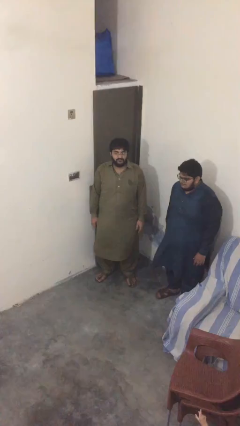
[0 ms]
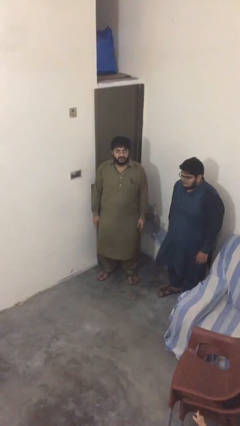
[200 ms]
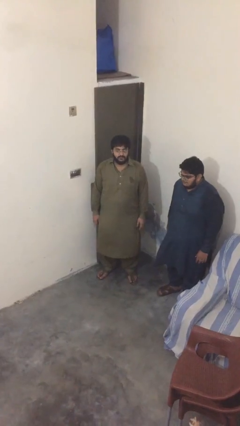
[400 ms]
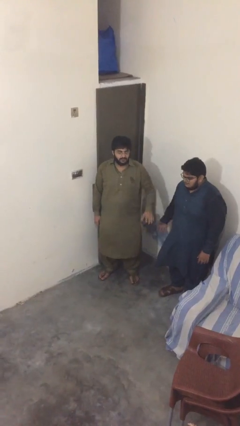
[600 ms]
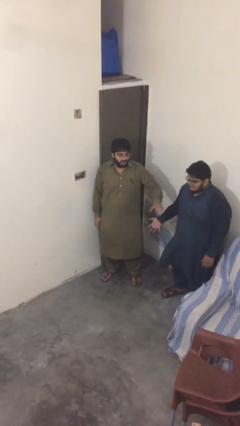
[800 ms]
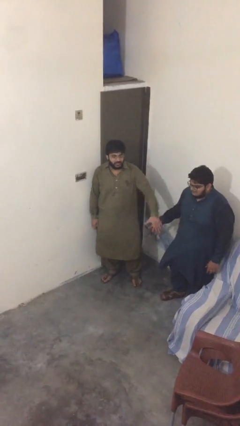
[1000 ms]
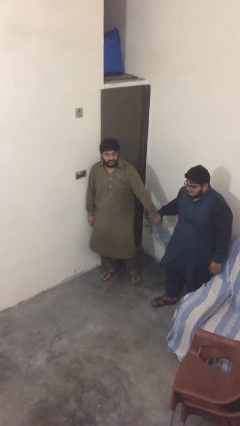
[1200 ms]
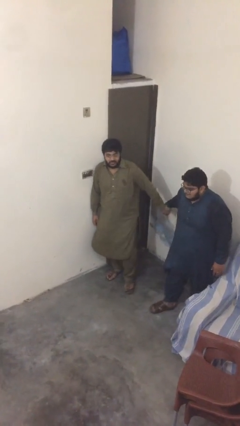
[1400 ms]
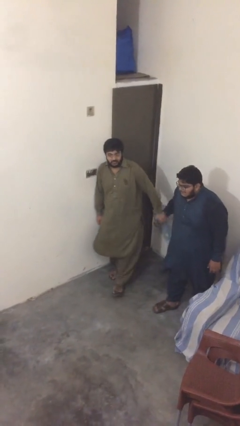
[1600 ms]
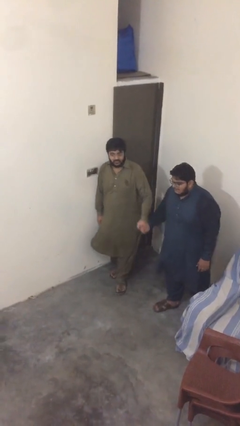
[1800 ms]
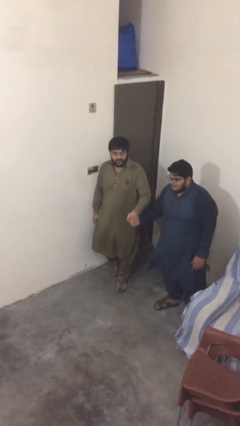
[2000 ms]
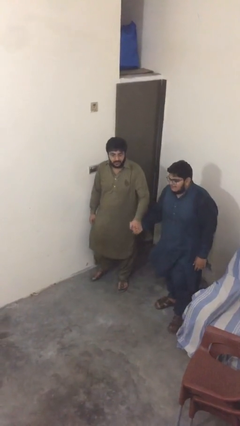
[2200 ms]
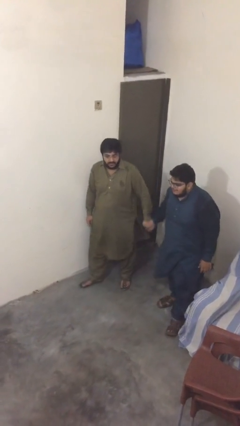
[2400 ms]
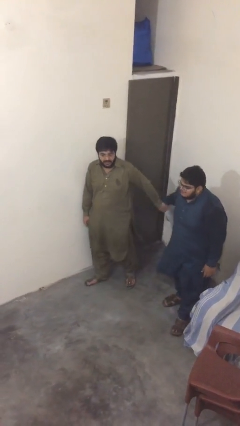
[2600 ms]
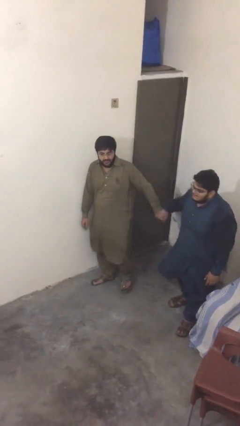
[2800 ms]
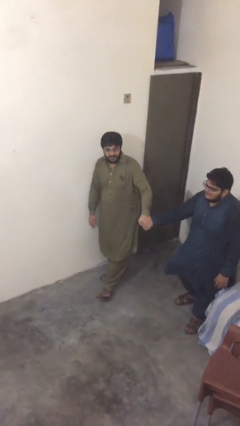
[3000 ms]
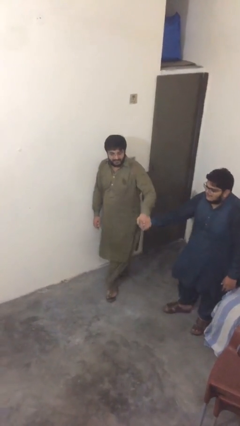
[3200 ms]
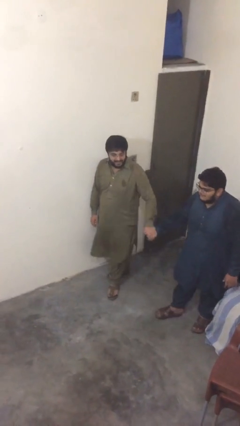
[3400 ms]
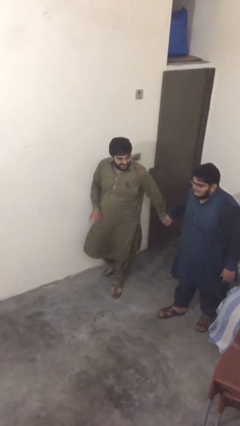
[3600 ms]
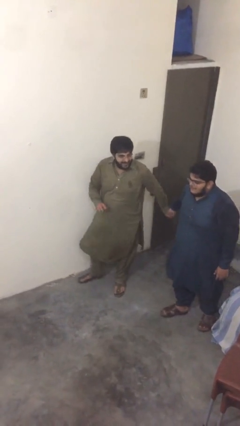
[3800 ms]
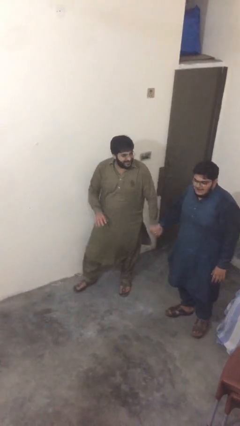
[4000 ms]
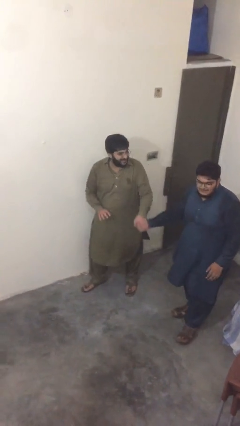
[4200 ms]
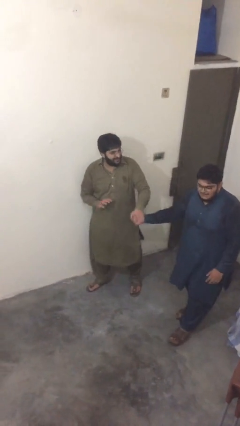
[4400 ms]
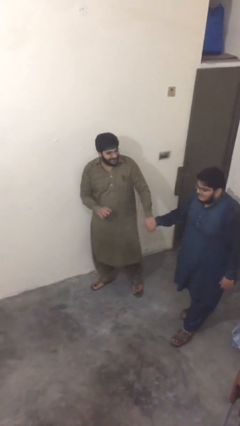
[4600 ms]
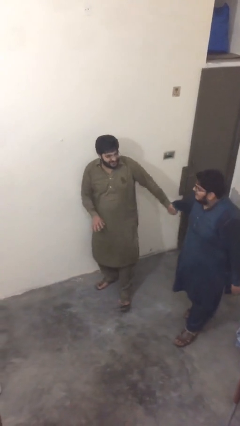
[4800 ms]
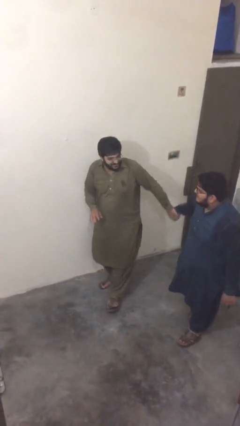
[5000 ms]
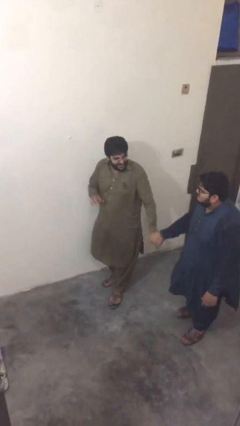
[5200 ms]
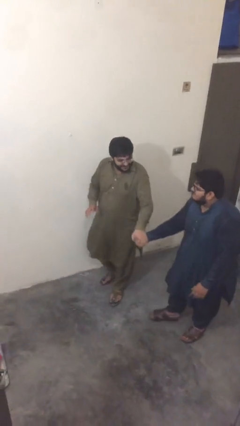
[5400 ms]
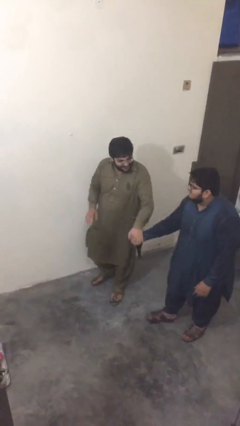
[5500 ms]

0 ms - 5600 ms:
person holds hand

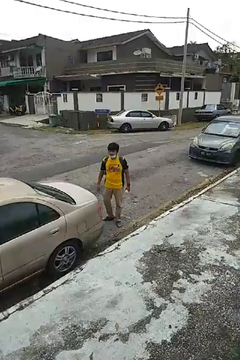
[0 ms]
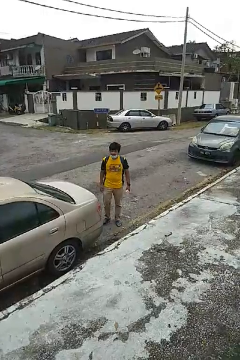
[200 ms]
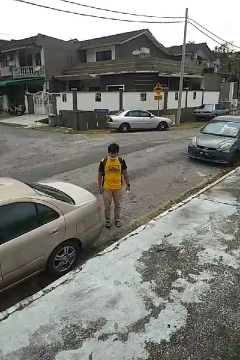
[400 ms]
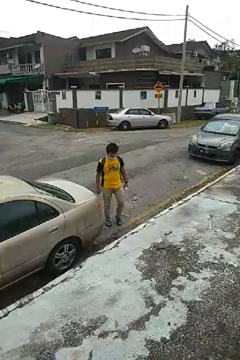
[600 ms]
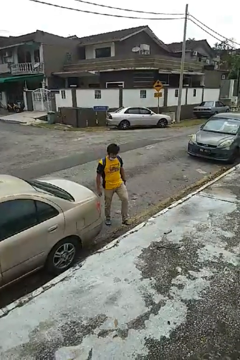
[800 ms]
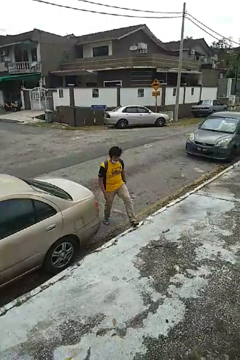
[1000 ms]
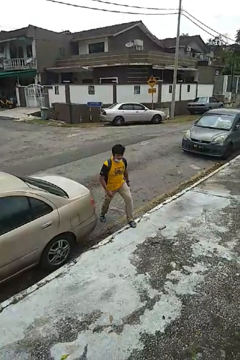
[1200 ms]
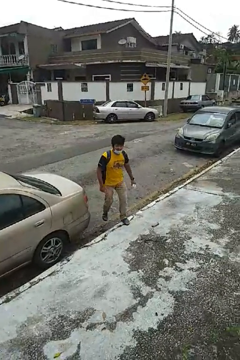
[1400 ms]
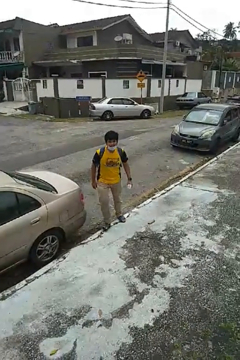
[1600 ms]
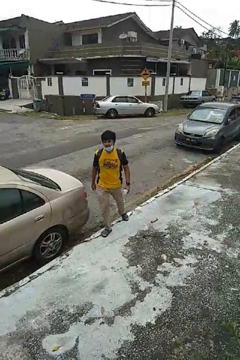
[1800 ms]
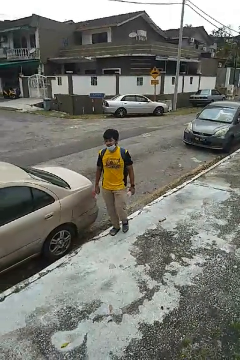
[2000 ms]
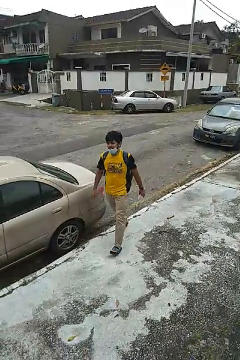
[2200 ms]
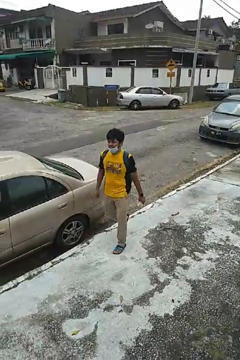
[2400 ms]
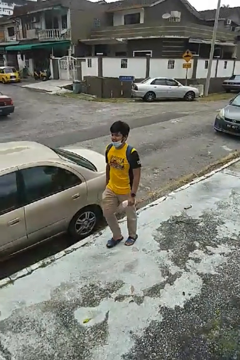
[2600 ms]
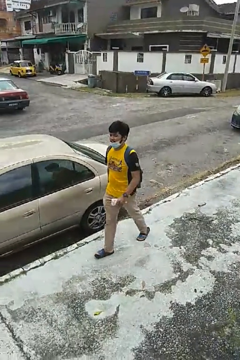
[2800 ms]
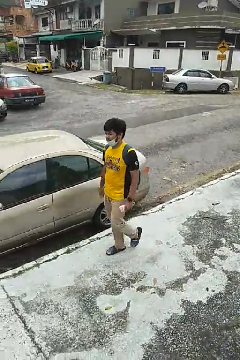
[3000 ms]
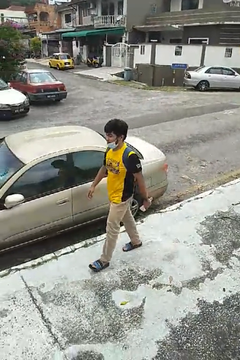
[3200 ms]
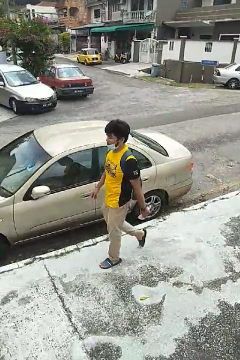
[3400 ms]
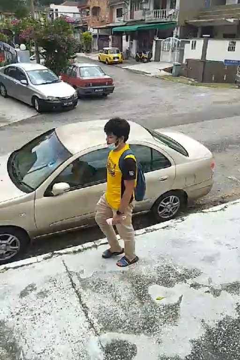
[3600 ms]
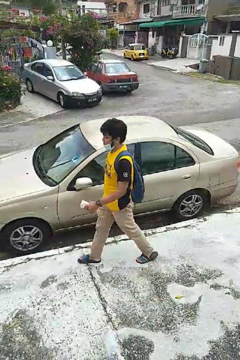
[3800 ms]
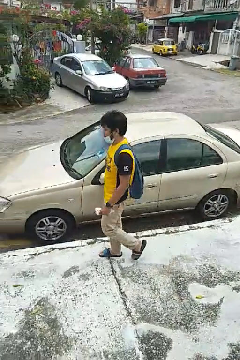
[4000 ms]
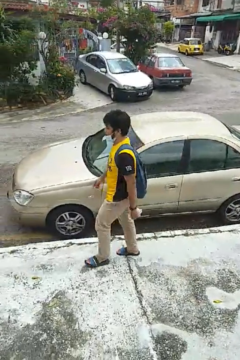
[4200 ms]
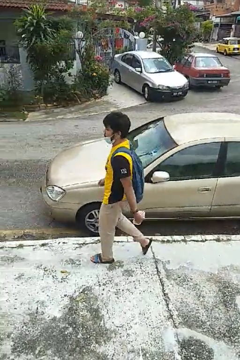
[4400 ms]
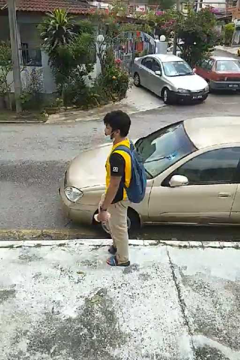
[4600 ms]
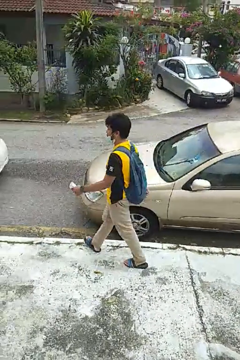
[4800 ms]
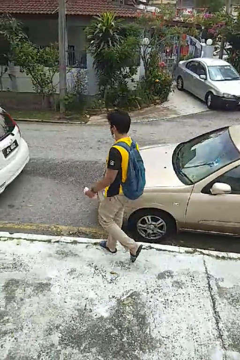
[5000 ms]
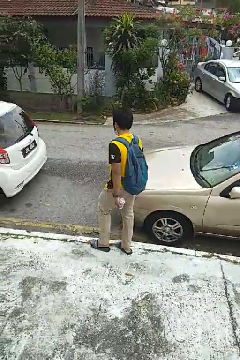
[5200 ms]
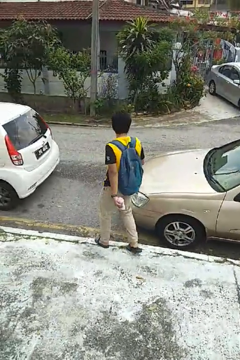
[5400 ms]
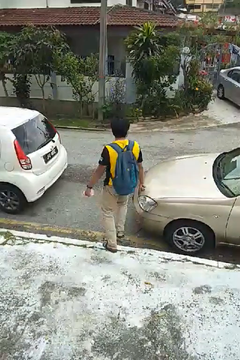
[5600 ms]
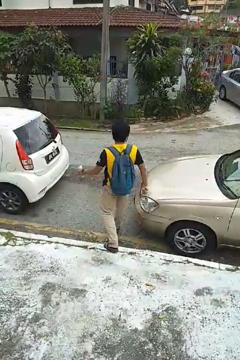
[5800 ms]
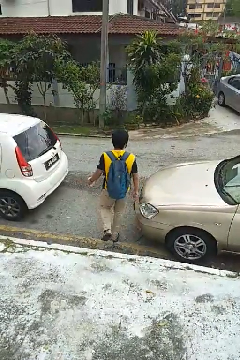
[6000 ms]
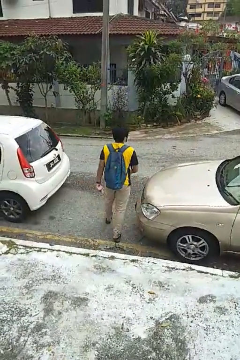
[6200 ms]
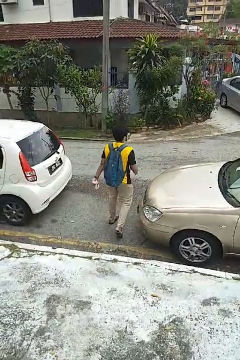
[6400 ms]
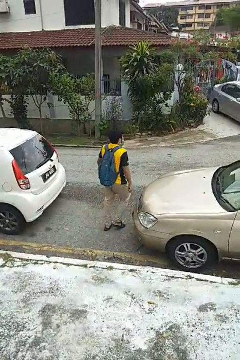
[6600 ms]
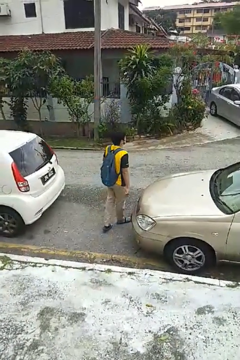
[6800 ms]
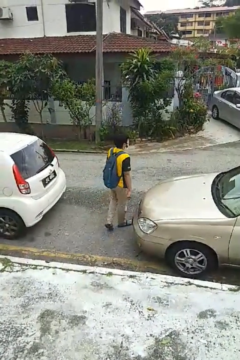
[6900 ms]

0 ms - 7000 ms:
person walks around car

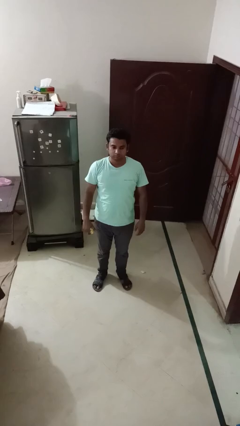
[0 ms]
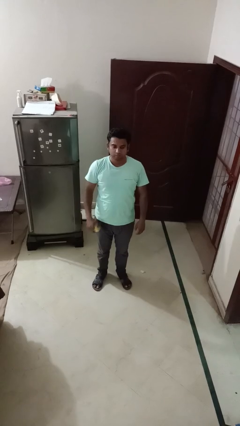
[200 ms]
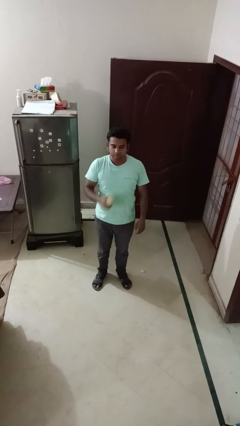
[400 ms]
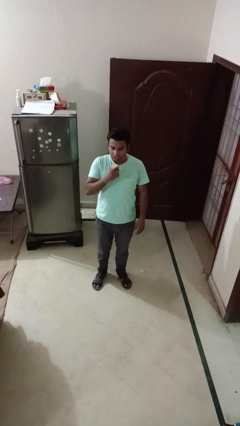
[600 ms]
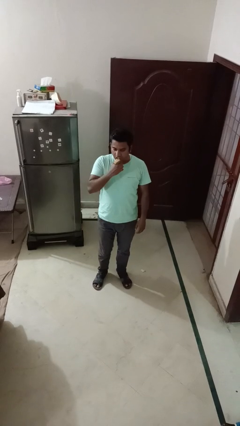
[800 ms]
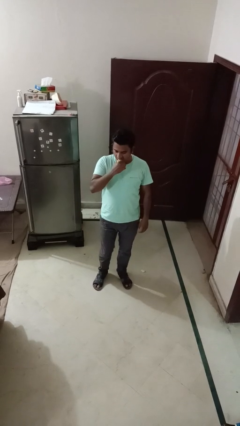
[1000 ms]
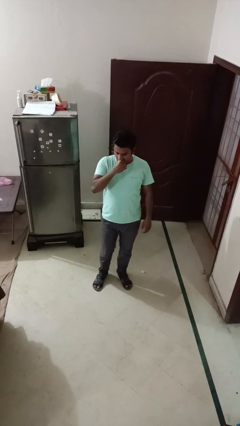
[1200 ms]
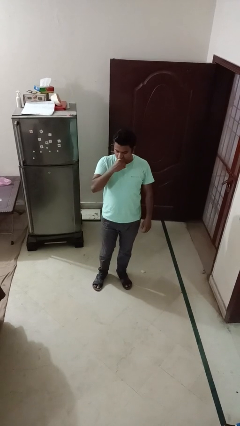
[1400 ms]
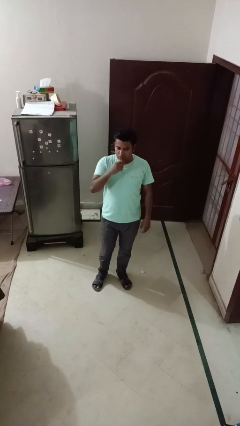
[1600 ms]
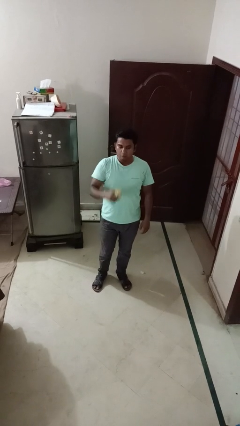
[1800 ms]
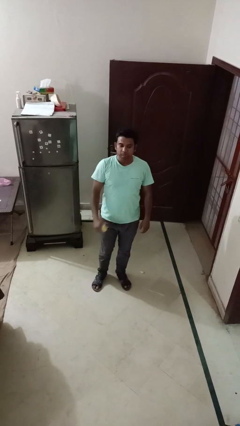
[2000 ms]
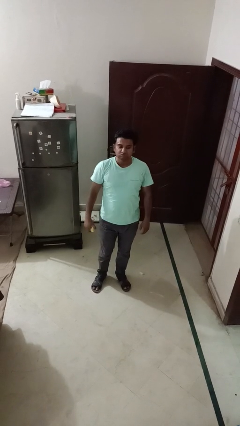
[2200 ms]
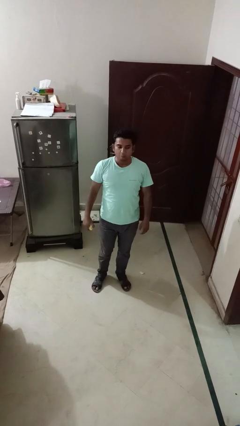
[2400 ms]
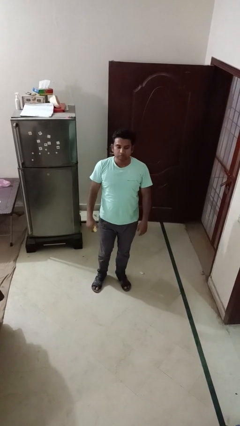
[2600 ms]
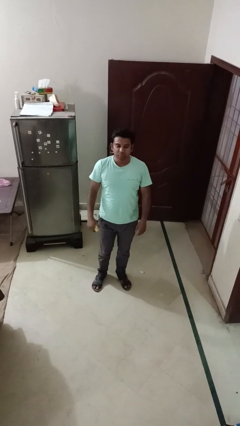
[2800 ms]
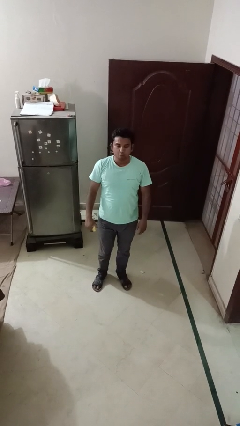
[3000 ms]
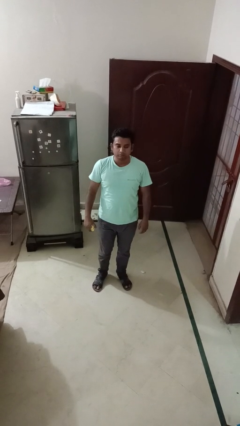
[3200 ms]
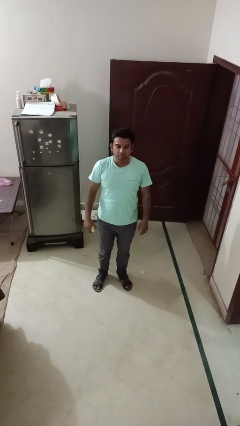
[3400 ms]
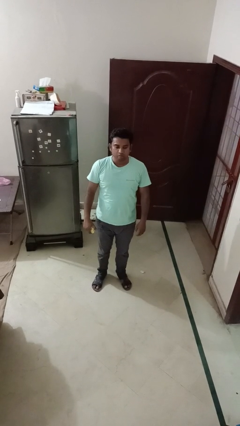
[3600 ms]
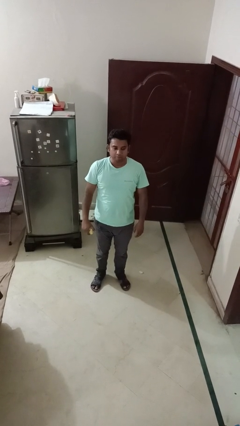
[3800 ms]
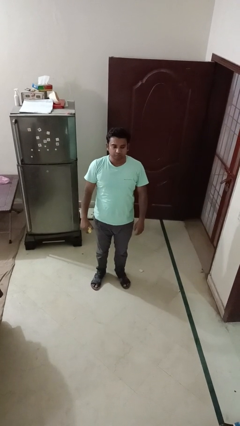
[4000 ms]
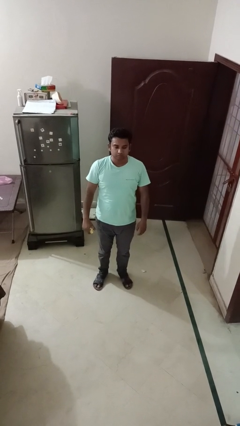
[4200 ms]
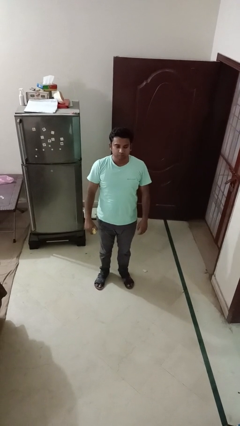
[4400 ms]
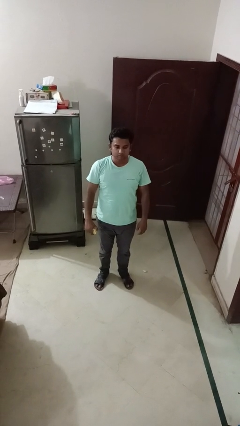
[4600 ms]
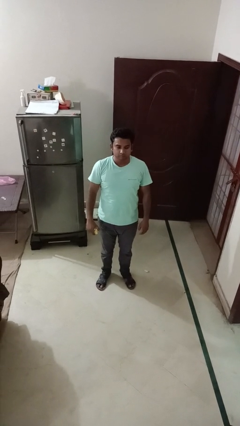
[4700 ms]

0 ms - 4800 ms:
person eats apple

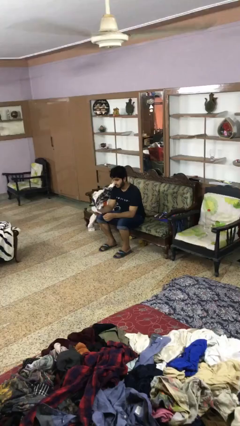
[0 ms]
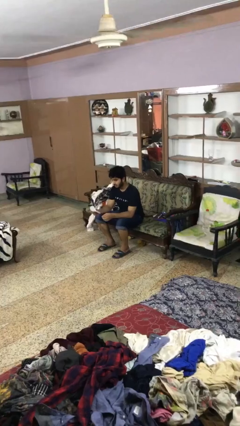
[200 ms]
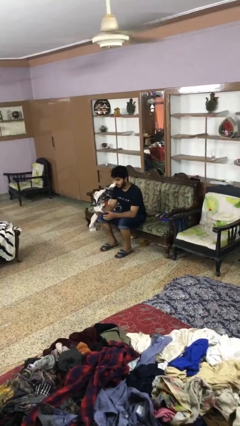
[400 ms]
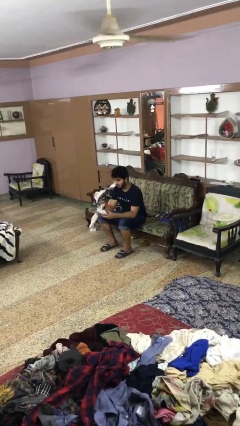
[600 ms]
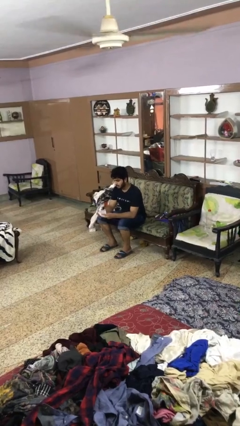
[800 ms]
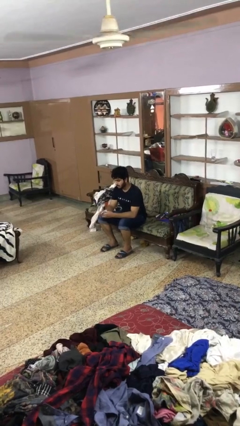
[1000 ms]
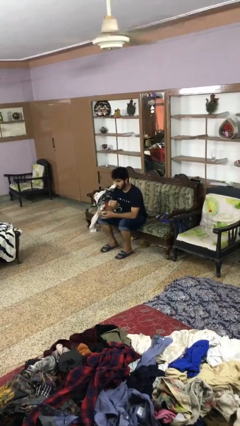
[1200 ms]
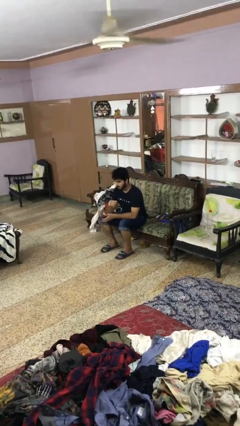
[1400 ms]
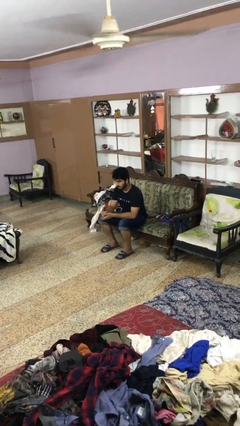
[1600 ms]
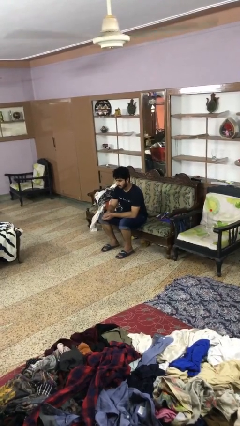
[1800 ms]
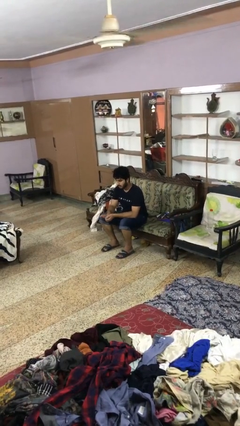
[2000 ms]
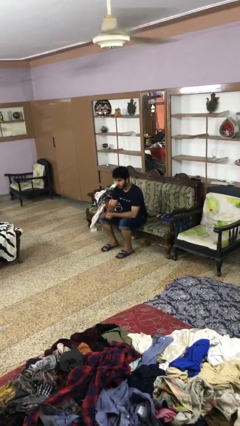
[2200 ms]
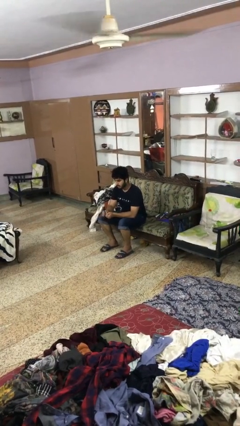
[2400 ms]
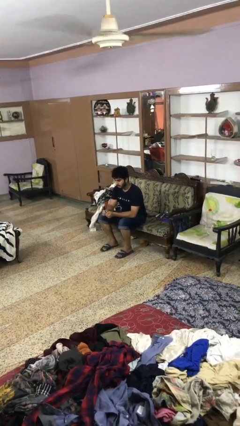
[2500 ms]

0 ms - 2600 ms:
person crumples paper
